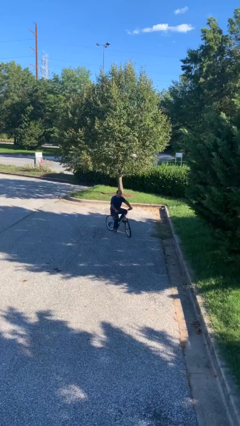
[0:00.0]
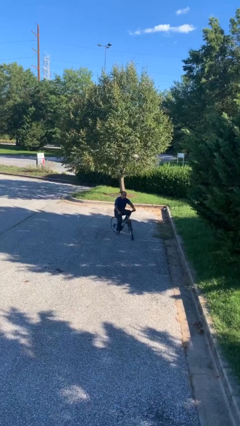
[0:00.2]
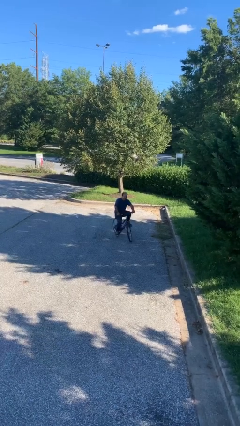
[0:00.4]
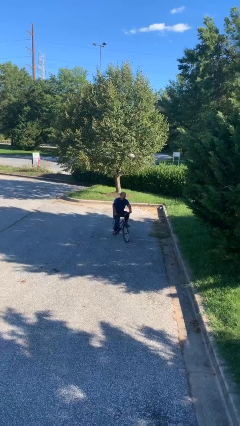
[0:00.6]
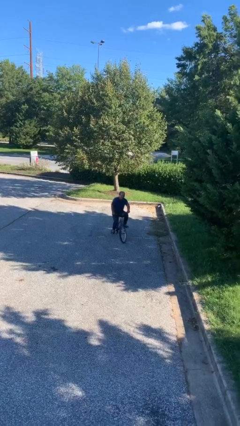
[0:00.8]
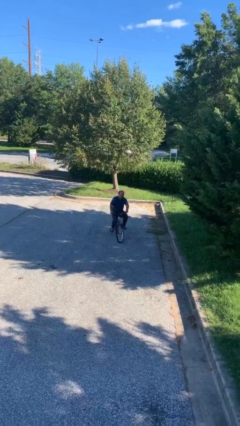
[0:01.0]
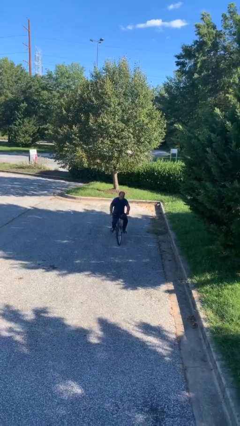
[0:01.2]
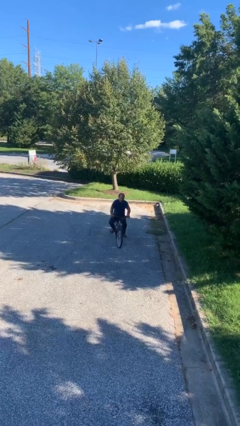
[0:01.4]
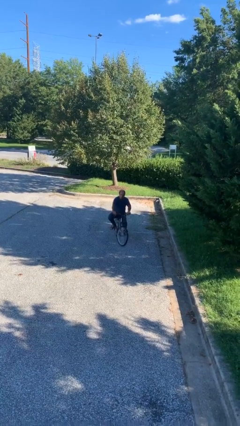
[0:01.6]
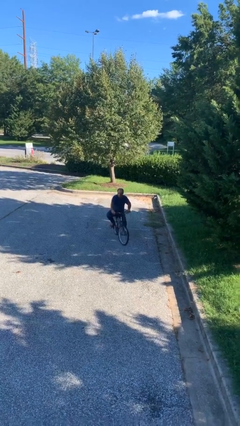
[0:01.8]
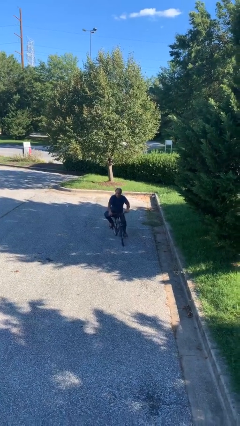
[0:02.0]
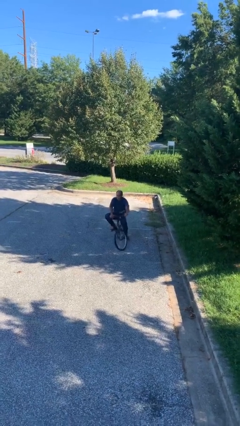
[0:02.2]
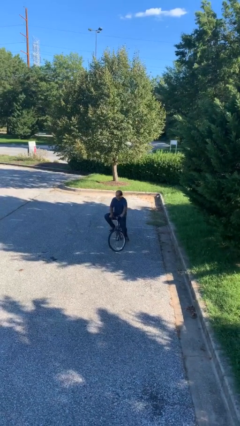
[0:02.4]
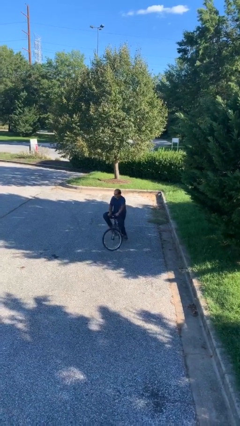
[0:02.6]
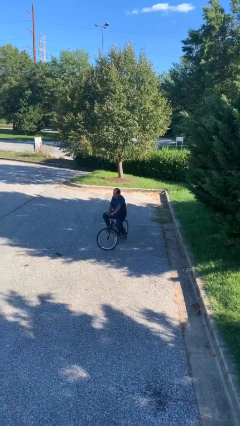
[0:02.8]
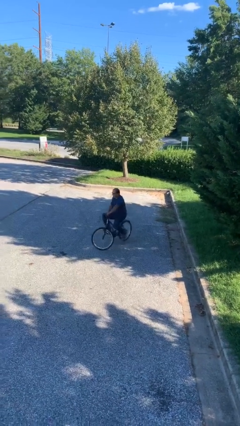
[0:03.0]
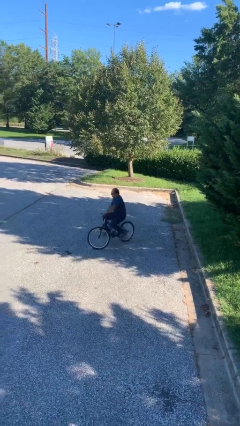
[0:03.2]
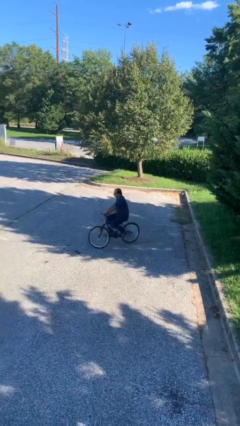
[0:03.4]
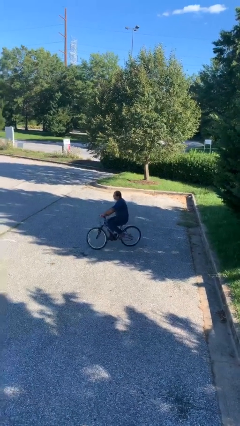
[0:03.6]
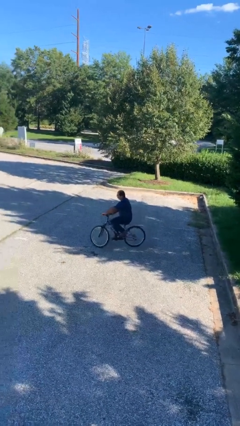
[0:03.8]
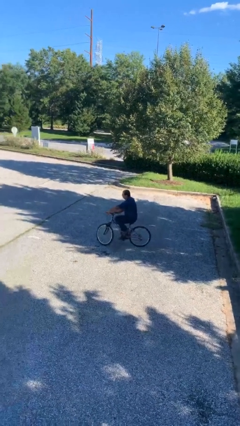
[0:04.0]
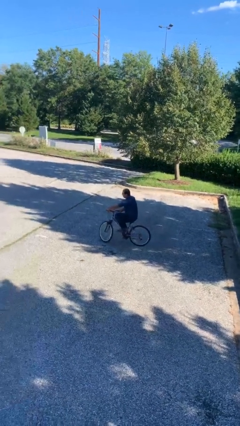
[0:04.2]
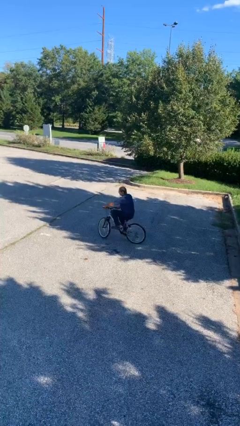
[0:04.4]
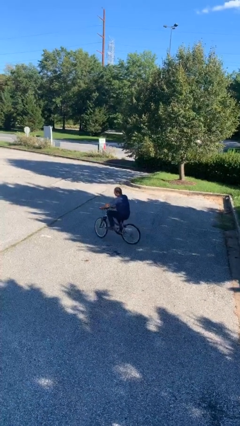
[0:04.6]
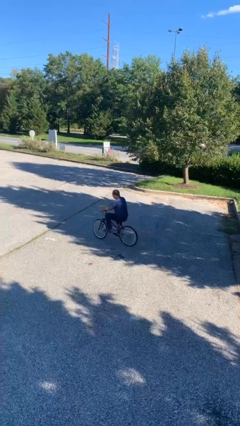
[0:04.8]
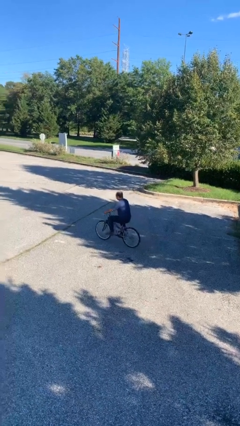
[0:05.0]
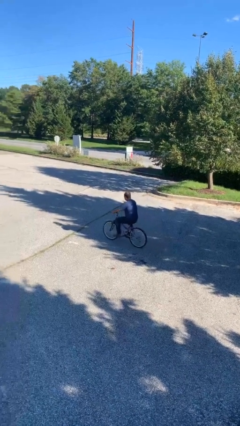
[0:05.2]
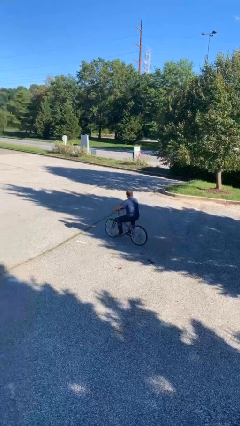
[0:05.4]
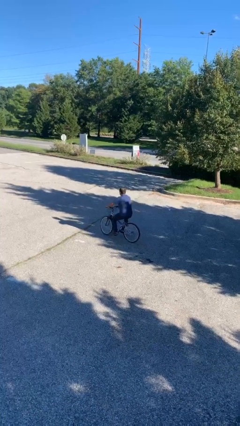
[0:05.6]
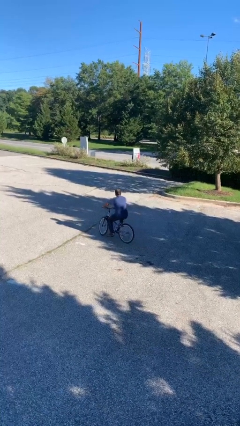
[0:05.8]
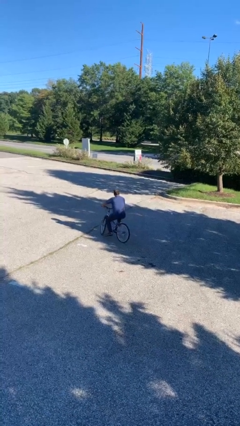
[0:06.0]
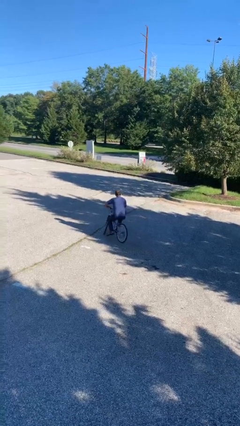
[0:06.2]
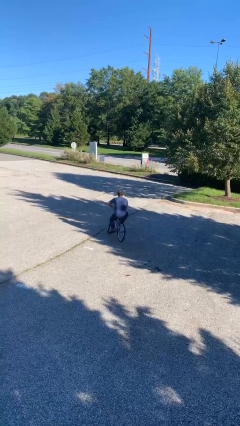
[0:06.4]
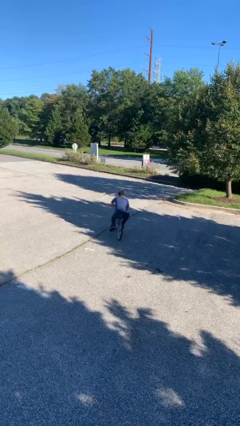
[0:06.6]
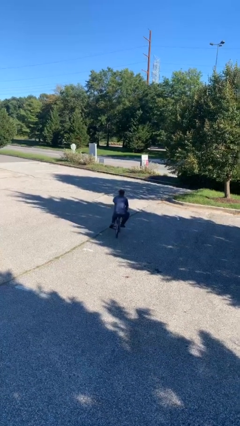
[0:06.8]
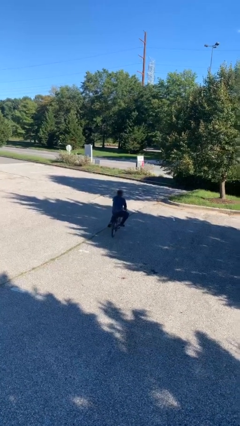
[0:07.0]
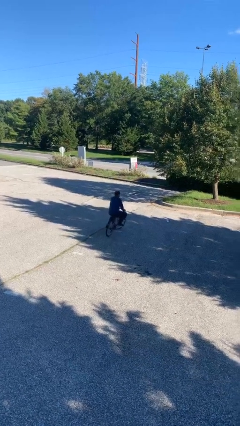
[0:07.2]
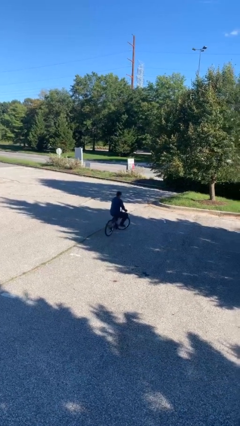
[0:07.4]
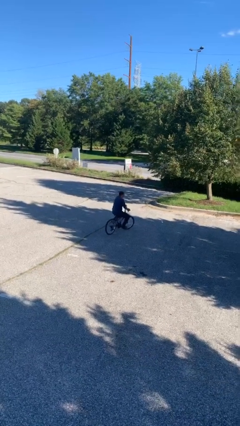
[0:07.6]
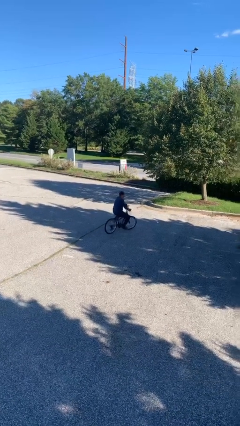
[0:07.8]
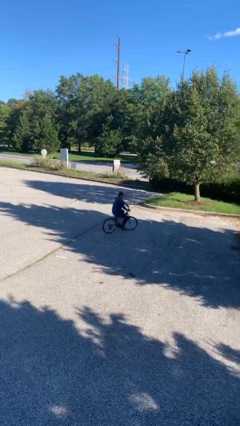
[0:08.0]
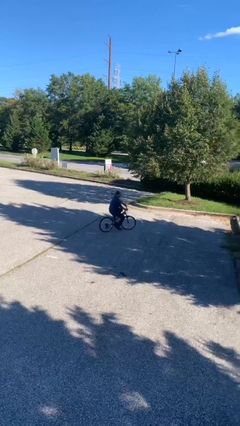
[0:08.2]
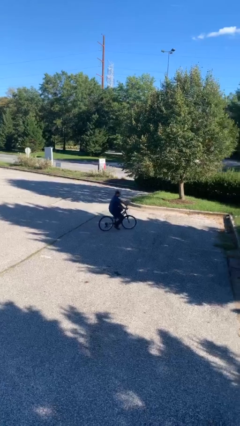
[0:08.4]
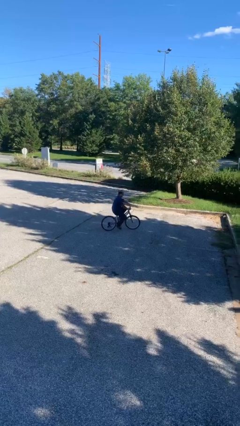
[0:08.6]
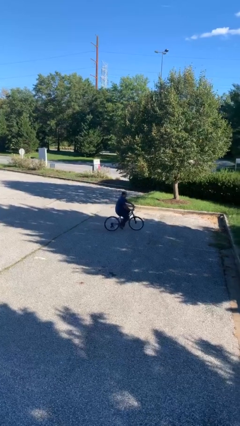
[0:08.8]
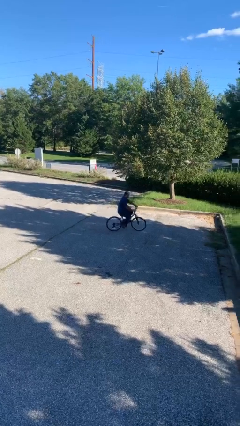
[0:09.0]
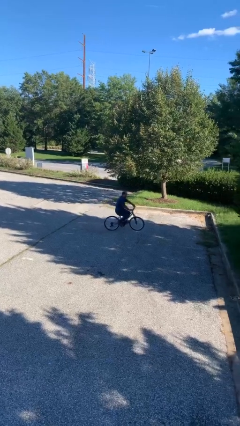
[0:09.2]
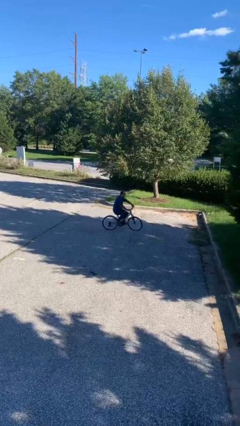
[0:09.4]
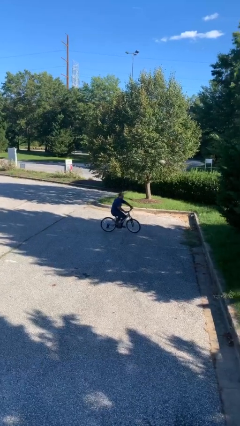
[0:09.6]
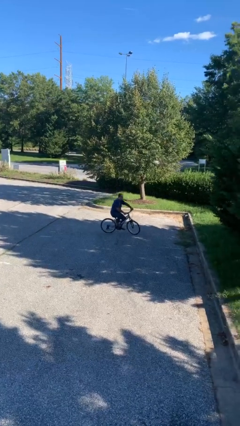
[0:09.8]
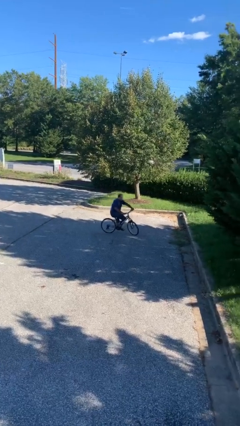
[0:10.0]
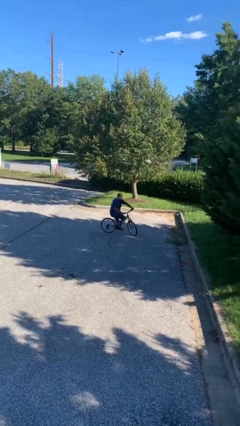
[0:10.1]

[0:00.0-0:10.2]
person rides bicycle

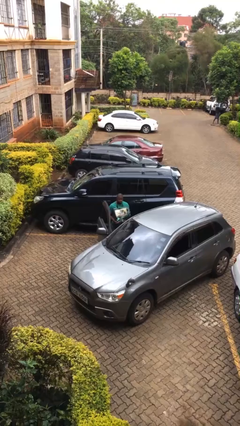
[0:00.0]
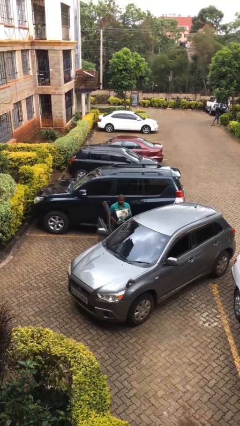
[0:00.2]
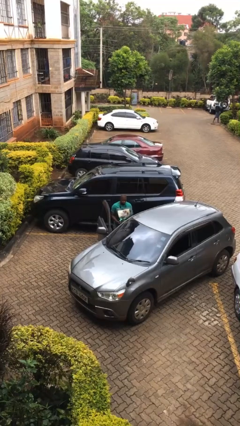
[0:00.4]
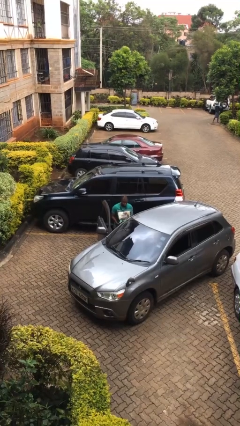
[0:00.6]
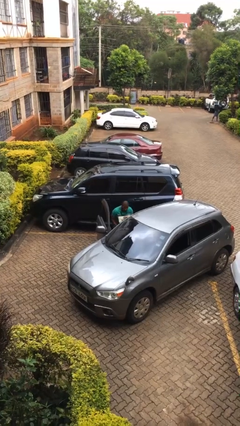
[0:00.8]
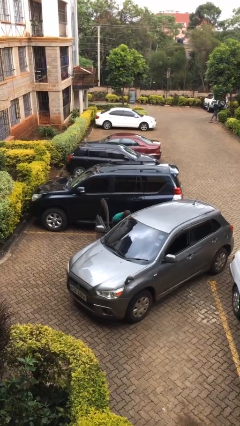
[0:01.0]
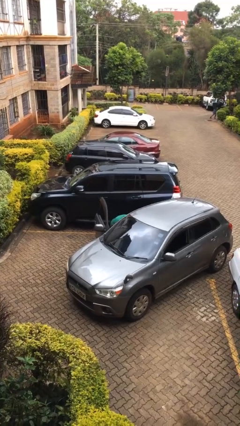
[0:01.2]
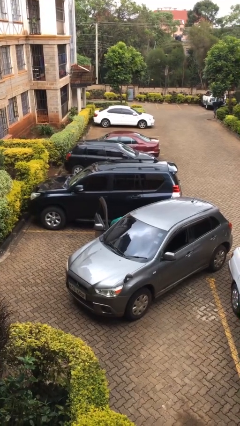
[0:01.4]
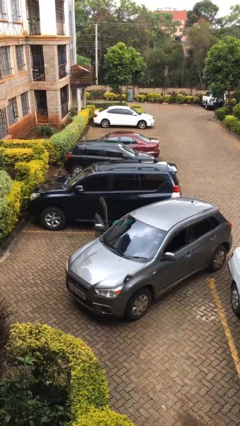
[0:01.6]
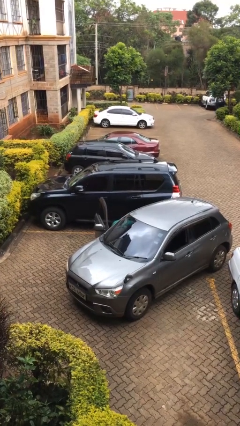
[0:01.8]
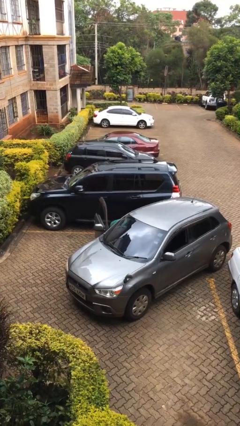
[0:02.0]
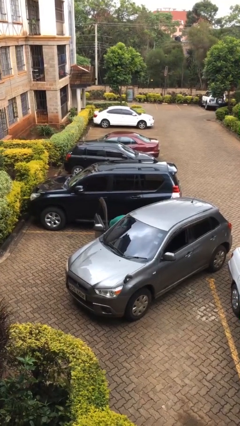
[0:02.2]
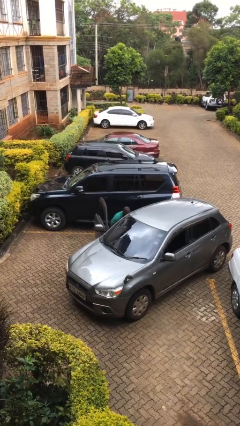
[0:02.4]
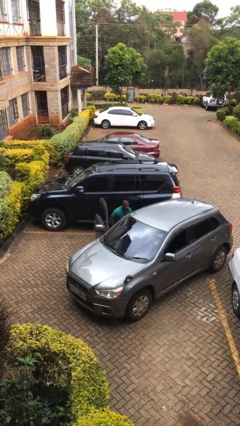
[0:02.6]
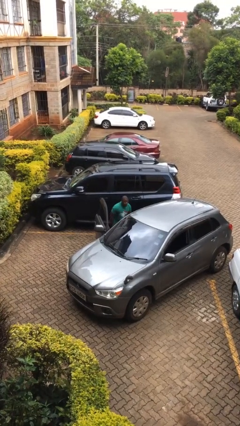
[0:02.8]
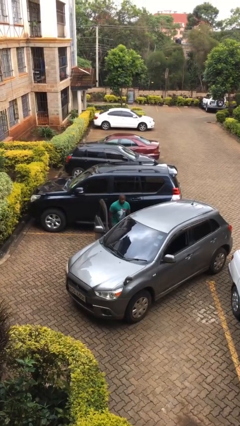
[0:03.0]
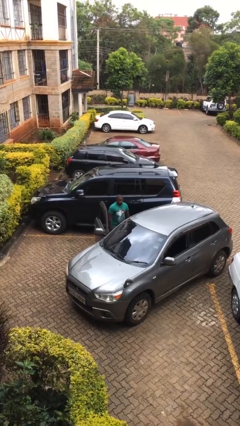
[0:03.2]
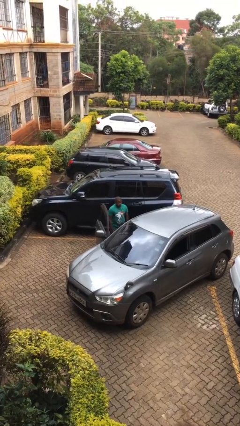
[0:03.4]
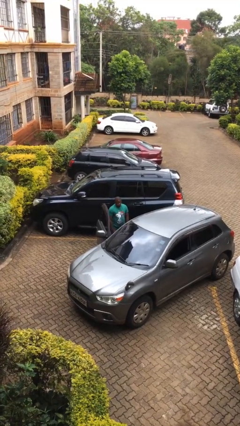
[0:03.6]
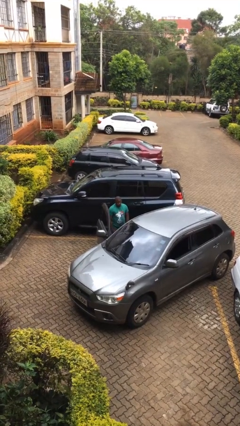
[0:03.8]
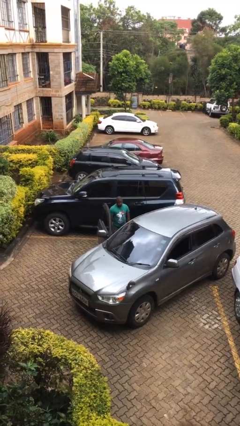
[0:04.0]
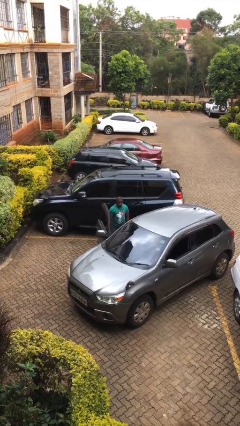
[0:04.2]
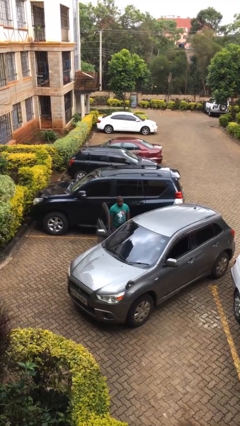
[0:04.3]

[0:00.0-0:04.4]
person loads car

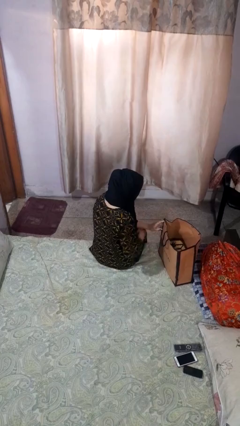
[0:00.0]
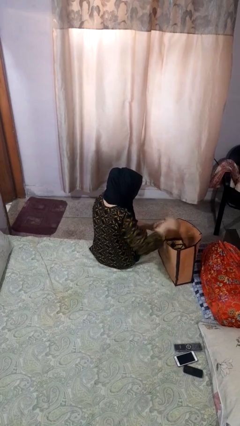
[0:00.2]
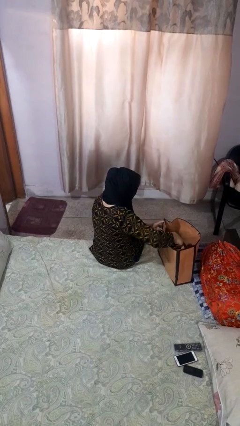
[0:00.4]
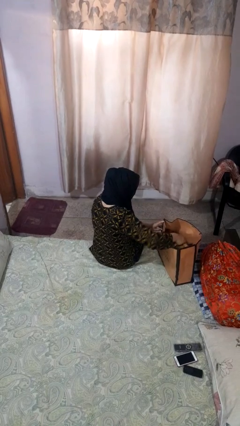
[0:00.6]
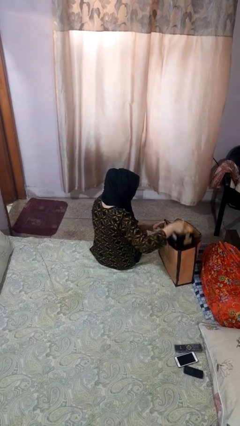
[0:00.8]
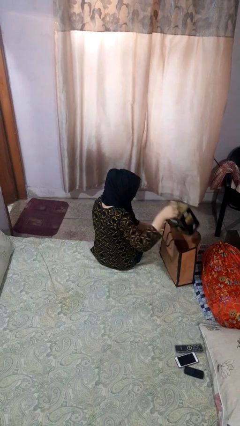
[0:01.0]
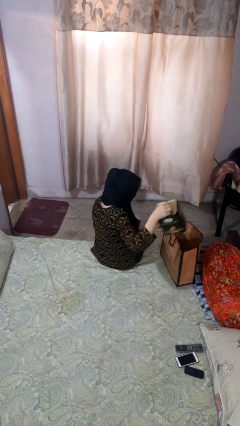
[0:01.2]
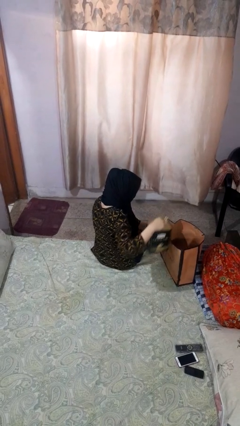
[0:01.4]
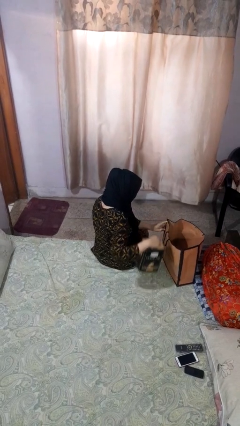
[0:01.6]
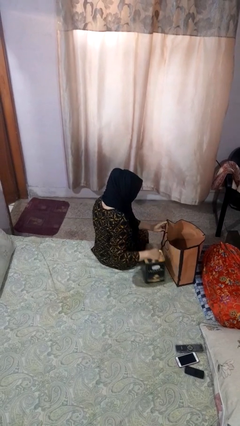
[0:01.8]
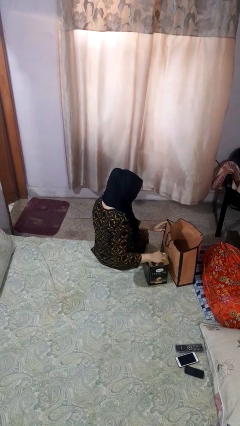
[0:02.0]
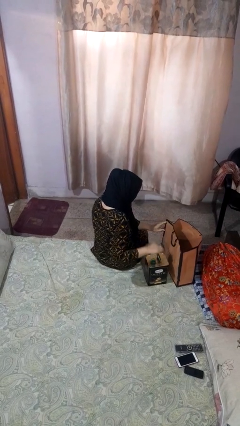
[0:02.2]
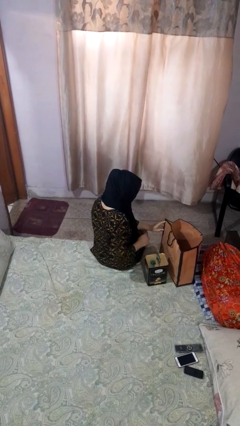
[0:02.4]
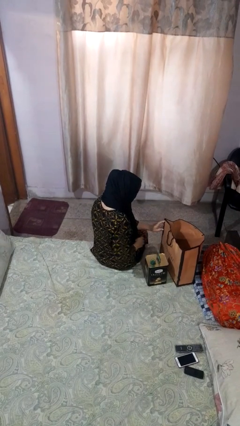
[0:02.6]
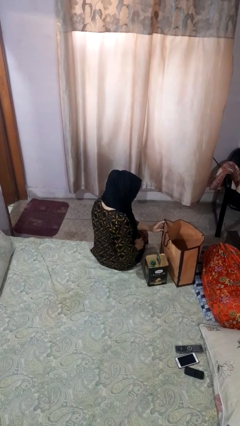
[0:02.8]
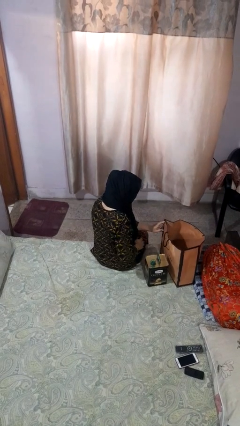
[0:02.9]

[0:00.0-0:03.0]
person takes object from bag

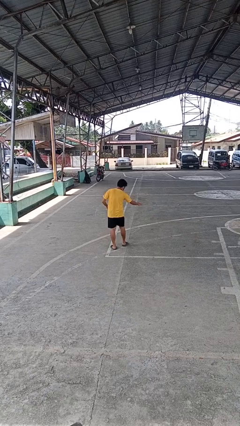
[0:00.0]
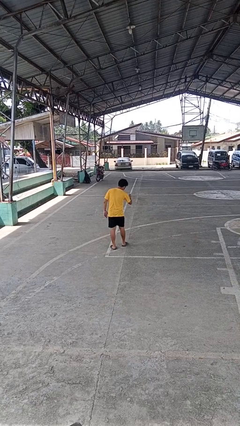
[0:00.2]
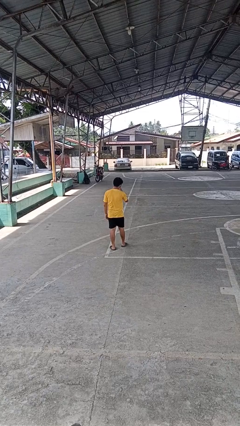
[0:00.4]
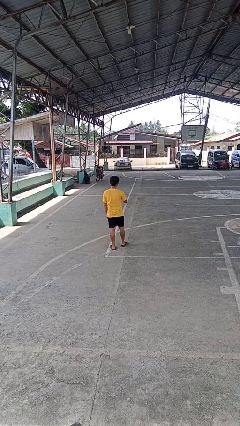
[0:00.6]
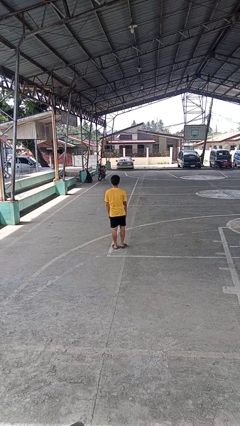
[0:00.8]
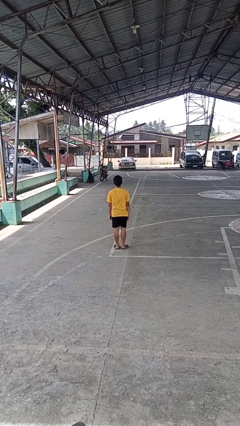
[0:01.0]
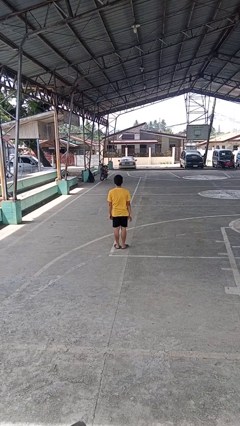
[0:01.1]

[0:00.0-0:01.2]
person karate chop
